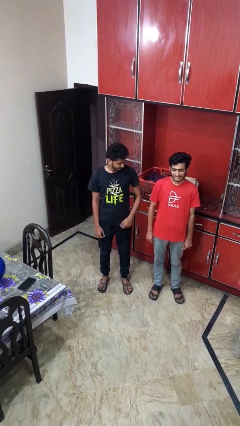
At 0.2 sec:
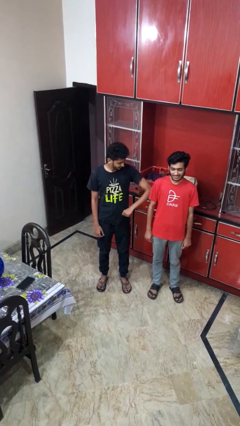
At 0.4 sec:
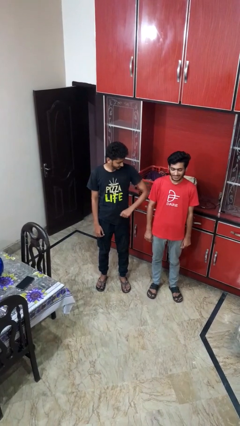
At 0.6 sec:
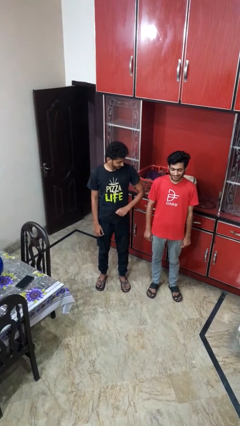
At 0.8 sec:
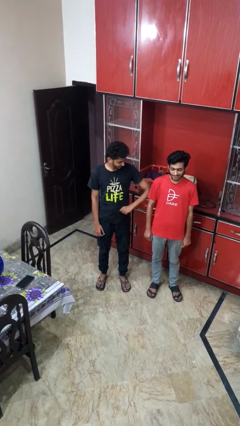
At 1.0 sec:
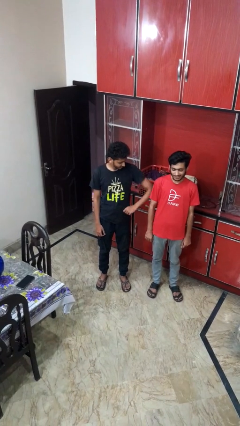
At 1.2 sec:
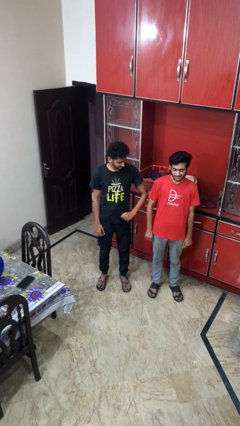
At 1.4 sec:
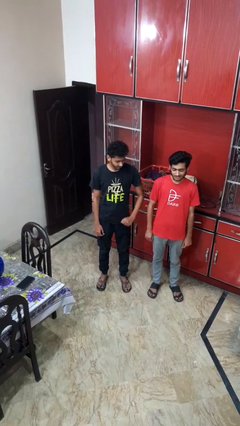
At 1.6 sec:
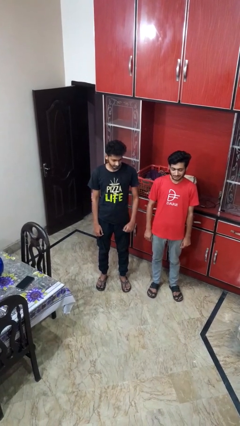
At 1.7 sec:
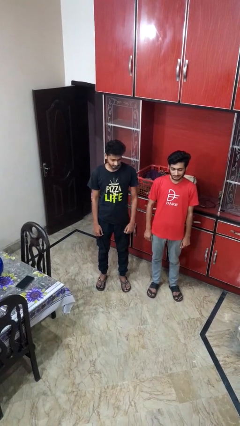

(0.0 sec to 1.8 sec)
person nudges person with elbow

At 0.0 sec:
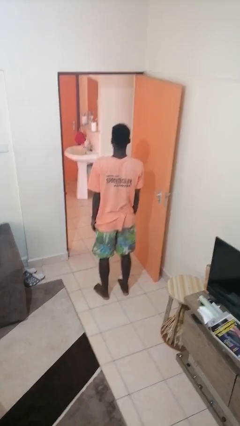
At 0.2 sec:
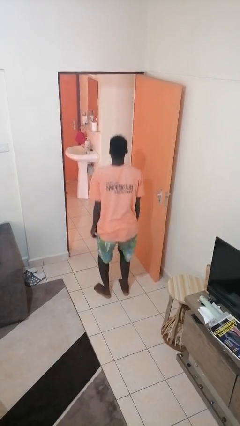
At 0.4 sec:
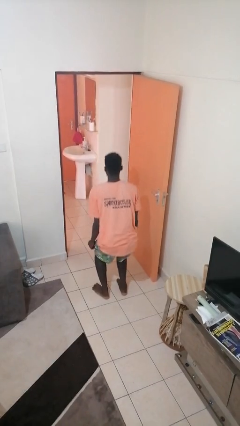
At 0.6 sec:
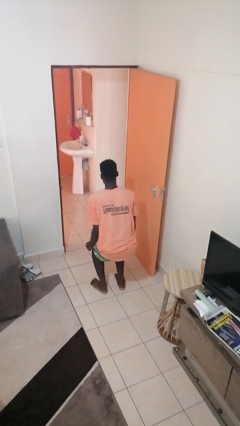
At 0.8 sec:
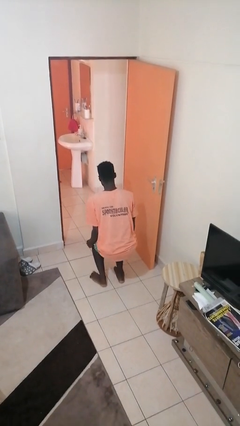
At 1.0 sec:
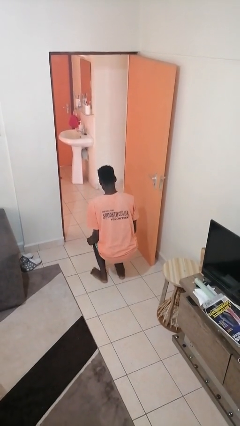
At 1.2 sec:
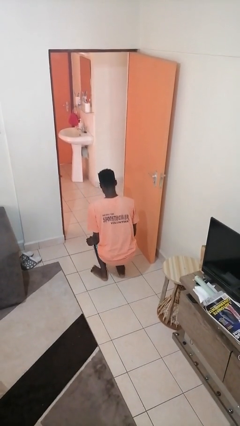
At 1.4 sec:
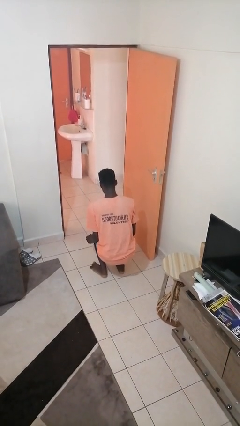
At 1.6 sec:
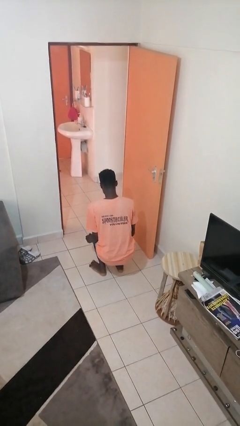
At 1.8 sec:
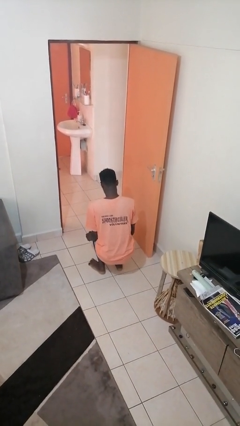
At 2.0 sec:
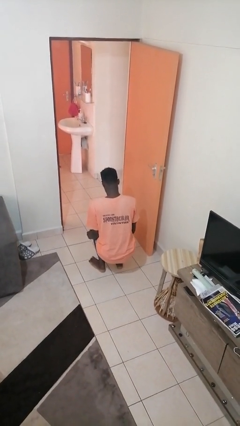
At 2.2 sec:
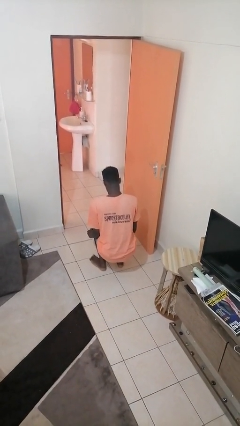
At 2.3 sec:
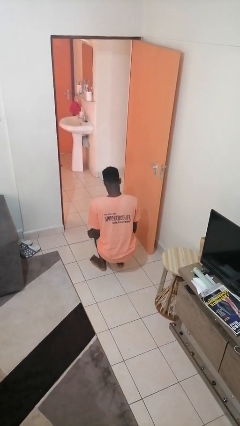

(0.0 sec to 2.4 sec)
person squats

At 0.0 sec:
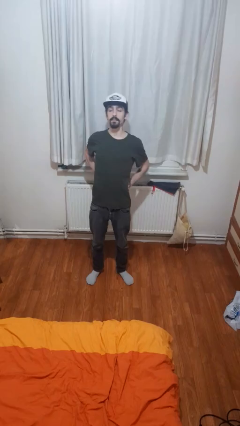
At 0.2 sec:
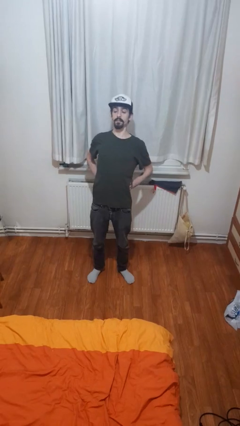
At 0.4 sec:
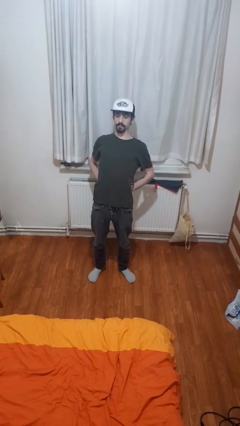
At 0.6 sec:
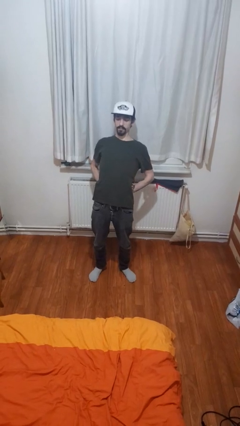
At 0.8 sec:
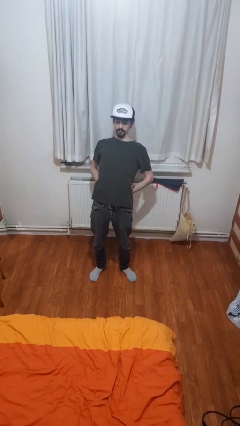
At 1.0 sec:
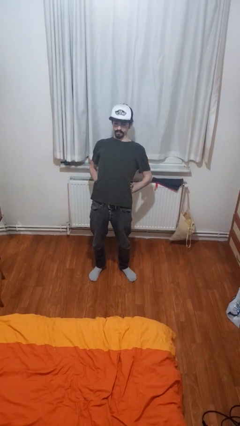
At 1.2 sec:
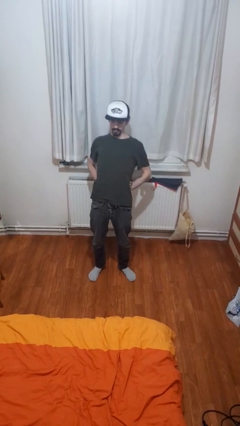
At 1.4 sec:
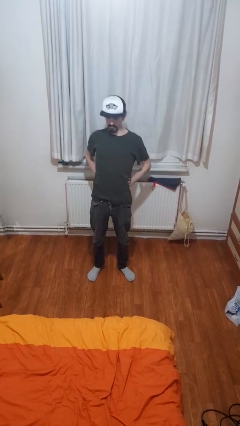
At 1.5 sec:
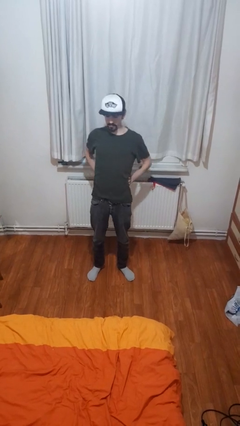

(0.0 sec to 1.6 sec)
person stretches back

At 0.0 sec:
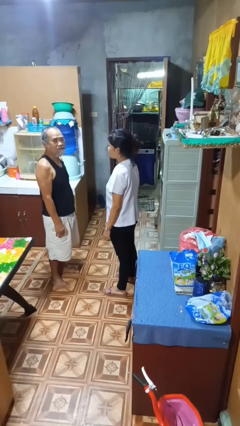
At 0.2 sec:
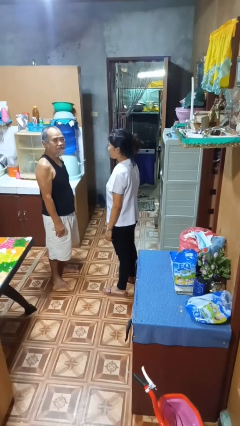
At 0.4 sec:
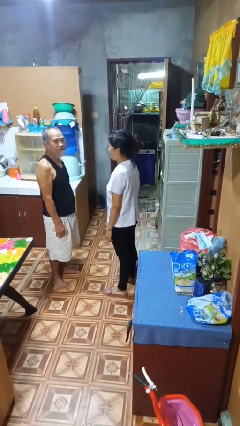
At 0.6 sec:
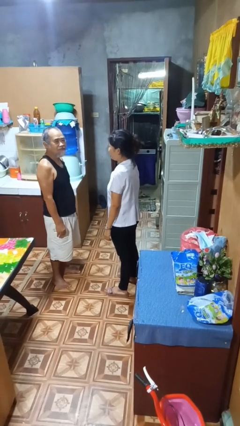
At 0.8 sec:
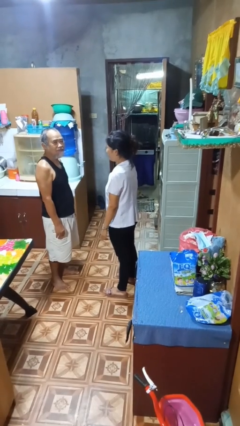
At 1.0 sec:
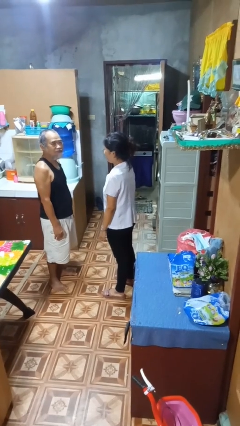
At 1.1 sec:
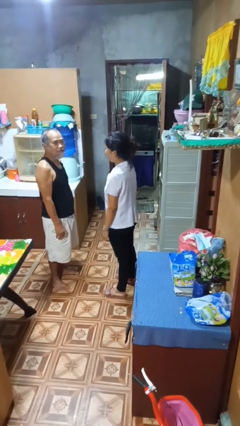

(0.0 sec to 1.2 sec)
person laughs with person

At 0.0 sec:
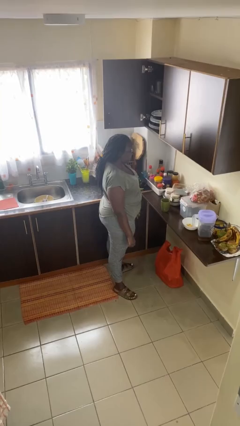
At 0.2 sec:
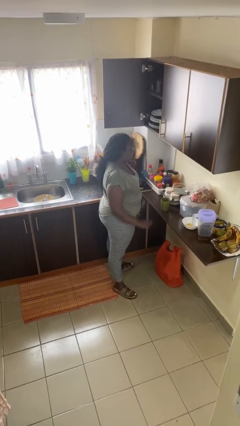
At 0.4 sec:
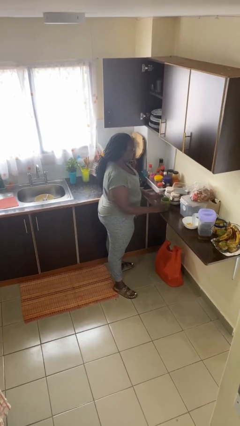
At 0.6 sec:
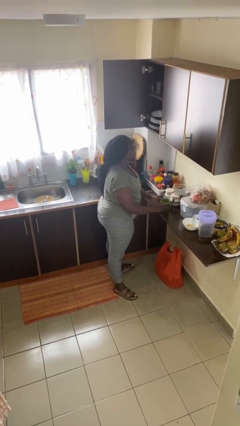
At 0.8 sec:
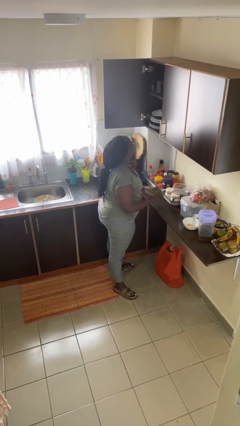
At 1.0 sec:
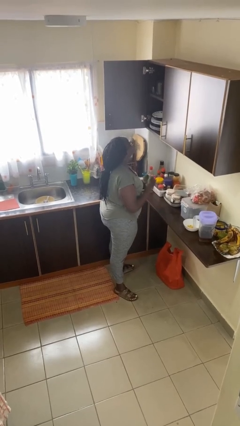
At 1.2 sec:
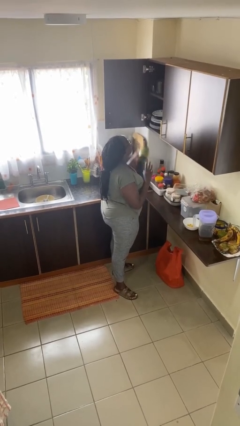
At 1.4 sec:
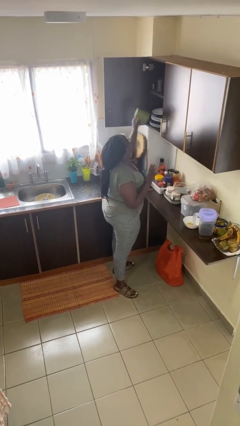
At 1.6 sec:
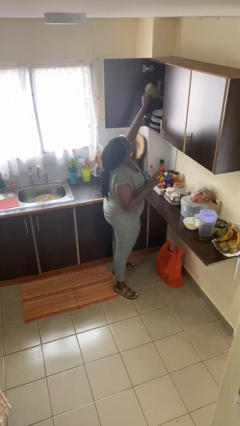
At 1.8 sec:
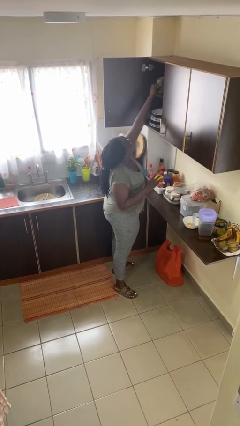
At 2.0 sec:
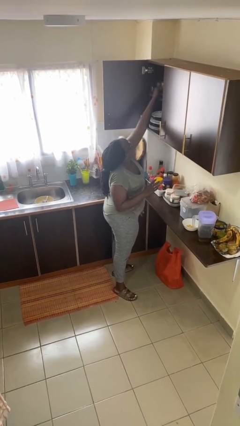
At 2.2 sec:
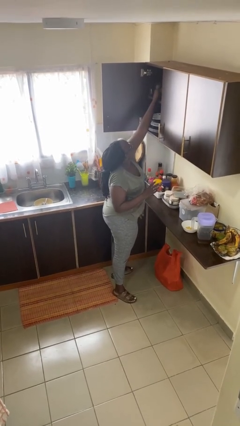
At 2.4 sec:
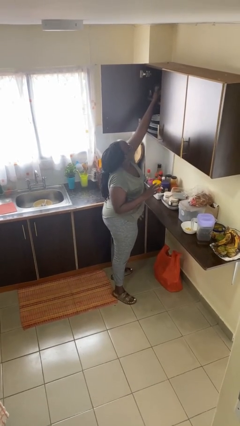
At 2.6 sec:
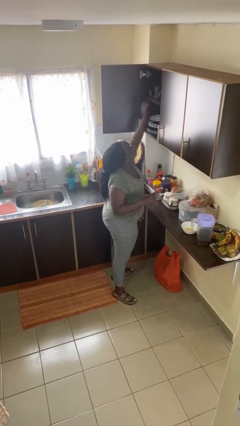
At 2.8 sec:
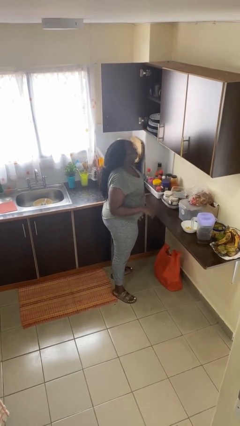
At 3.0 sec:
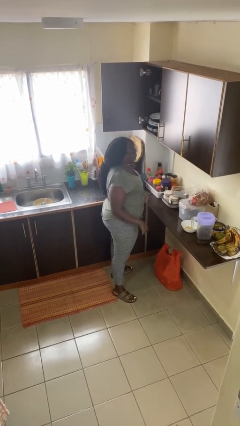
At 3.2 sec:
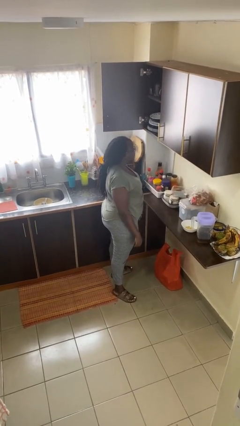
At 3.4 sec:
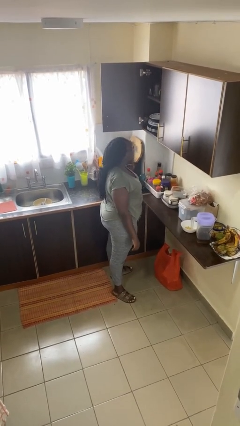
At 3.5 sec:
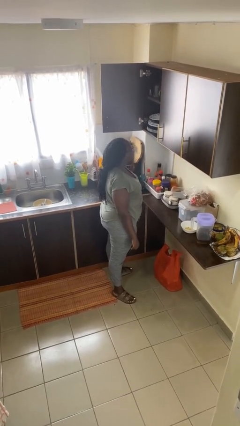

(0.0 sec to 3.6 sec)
person puts object in cabinet

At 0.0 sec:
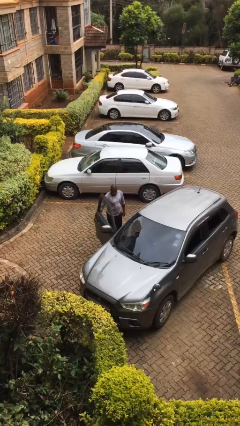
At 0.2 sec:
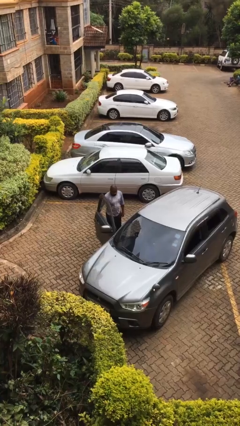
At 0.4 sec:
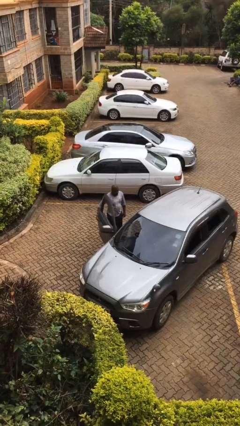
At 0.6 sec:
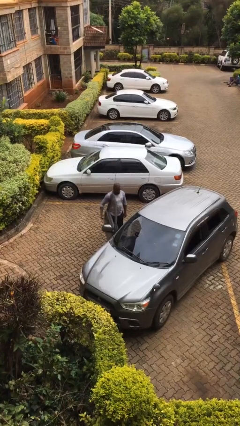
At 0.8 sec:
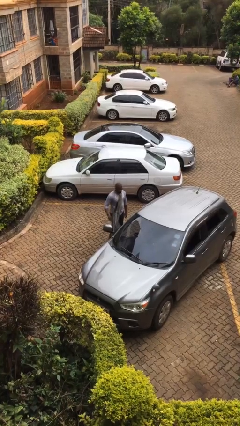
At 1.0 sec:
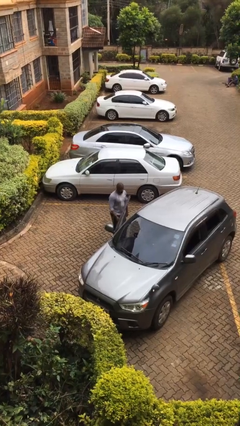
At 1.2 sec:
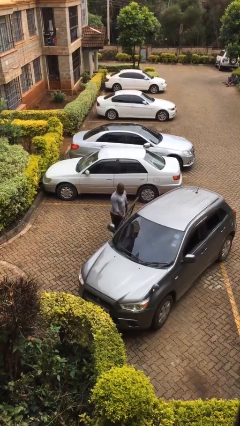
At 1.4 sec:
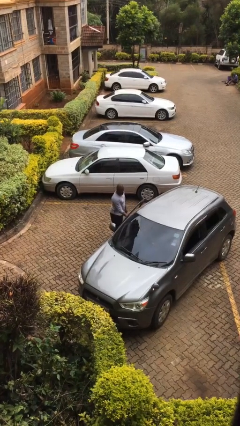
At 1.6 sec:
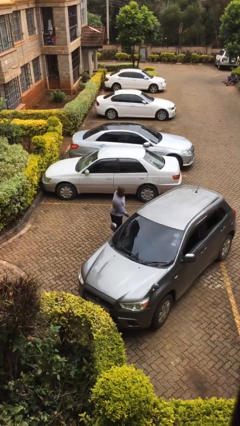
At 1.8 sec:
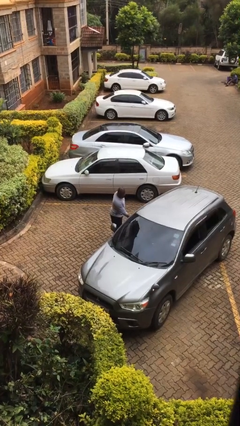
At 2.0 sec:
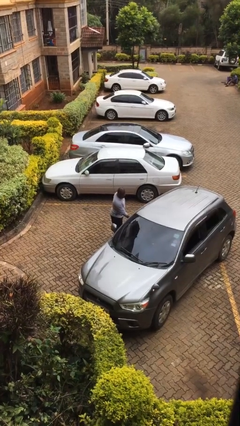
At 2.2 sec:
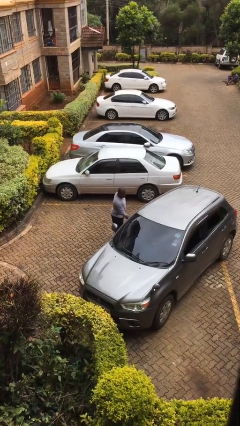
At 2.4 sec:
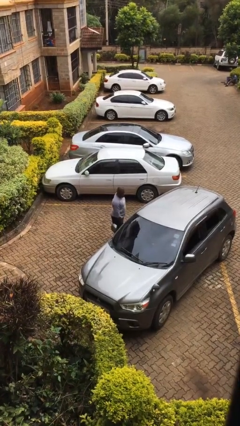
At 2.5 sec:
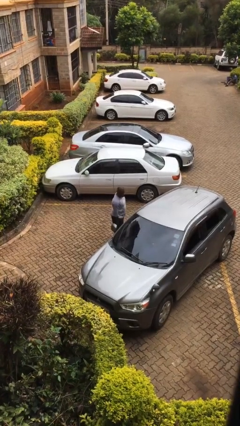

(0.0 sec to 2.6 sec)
person closes car door

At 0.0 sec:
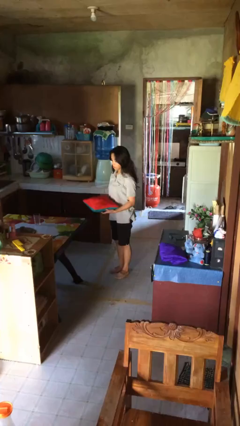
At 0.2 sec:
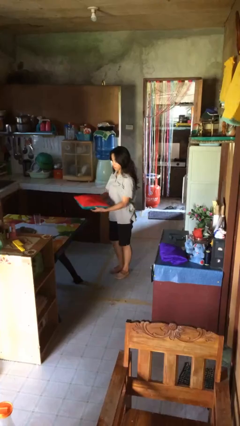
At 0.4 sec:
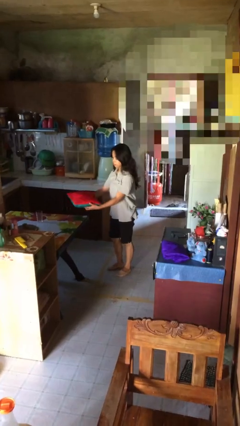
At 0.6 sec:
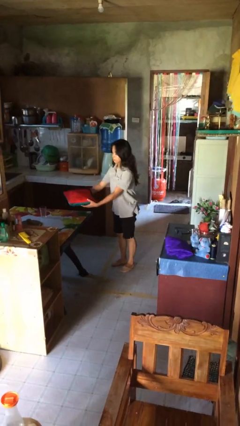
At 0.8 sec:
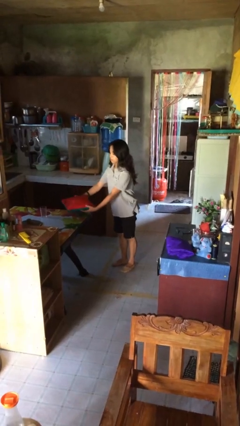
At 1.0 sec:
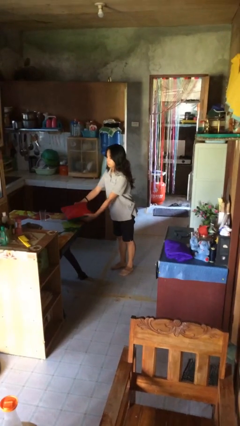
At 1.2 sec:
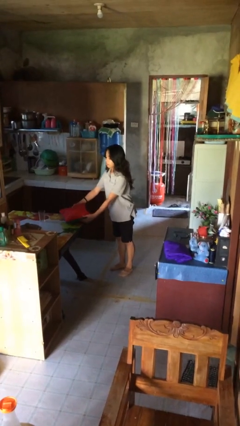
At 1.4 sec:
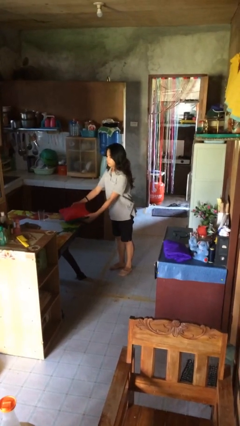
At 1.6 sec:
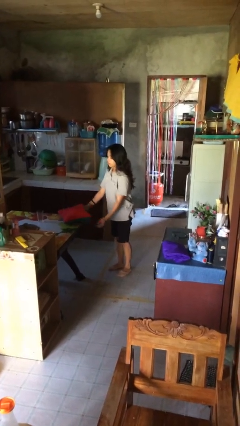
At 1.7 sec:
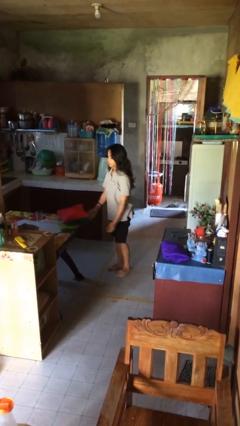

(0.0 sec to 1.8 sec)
person puts down object on table

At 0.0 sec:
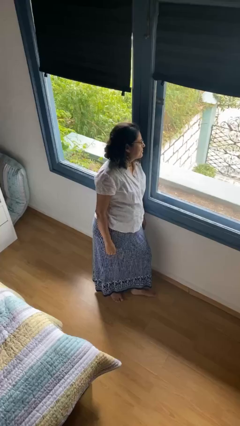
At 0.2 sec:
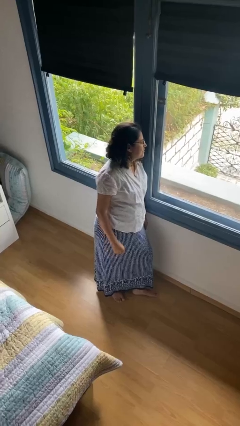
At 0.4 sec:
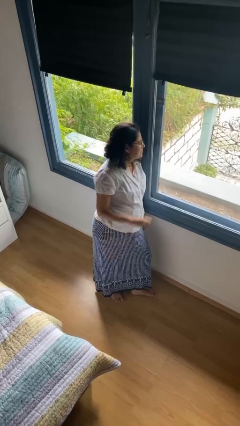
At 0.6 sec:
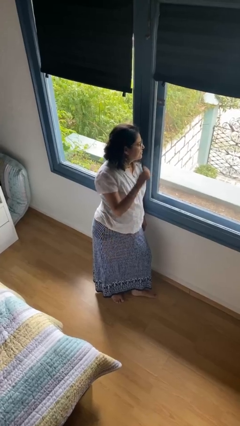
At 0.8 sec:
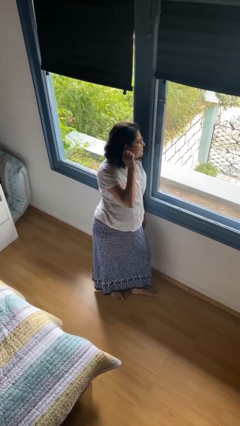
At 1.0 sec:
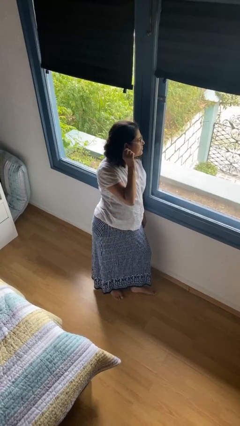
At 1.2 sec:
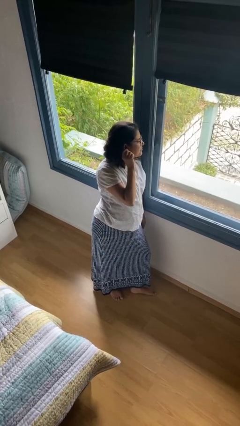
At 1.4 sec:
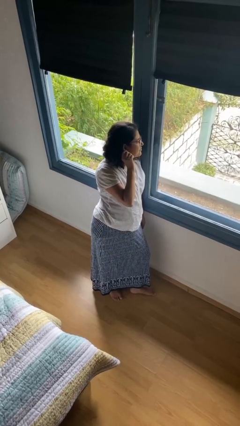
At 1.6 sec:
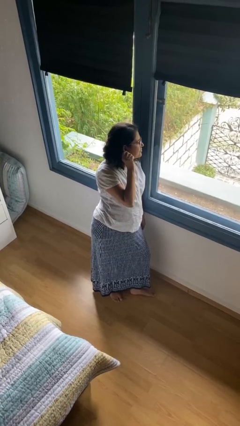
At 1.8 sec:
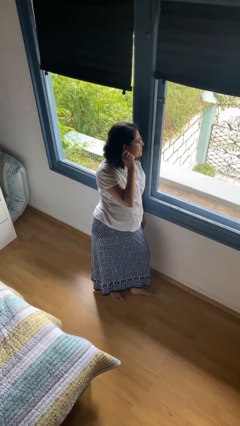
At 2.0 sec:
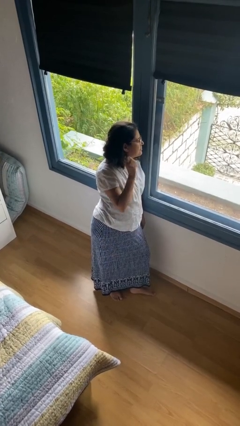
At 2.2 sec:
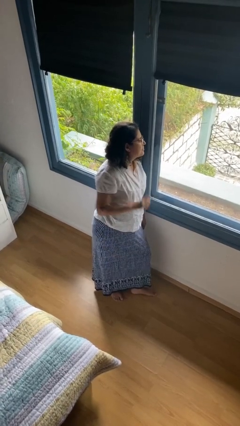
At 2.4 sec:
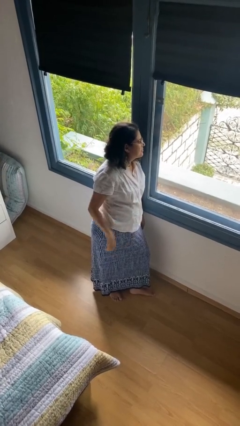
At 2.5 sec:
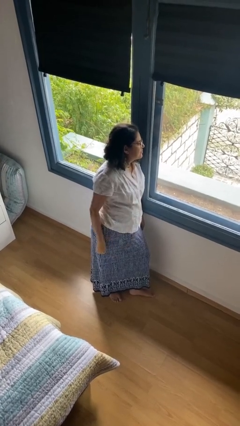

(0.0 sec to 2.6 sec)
person touches earlobe
